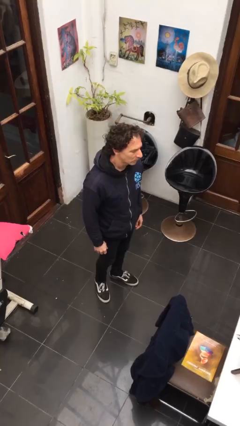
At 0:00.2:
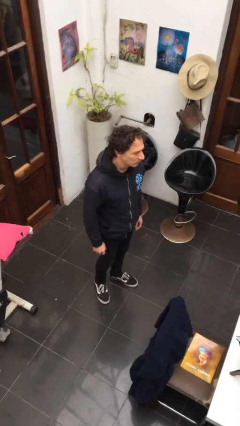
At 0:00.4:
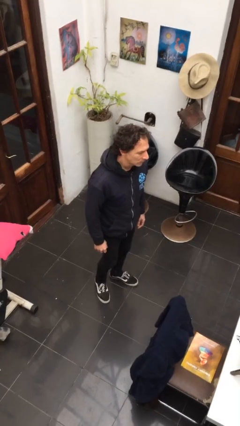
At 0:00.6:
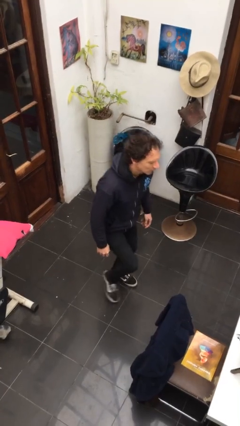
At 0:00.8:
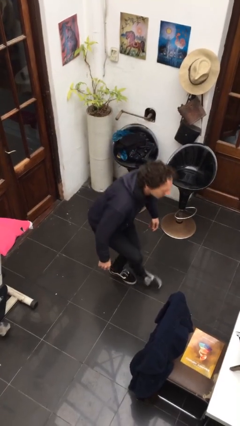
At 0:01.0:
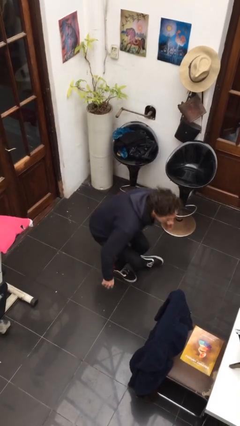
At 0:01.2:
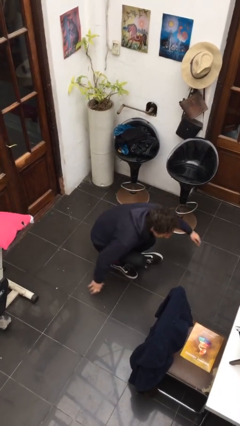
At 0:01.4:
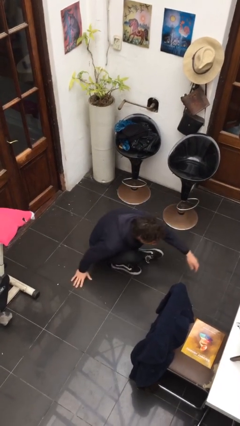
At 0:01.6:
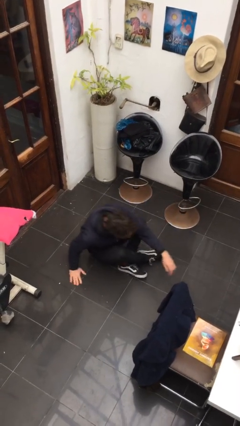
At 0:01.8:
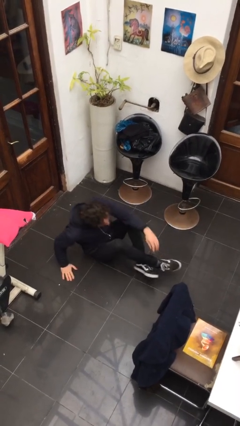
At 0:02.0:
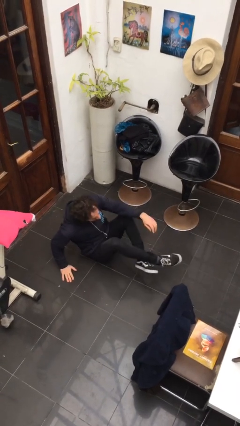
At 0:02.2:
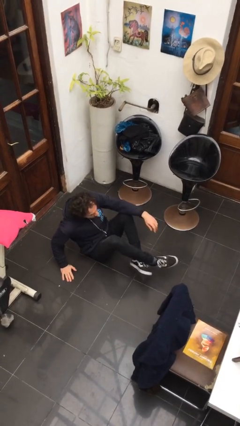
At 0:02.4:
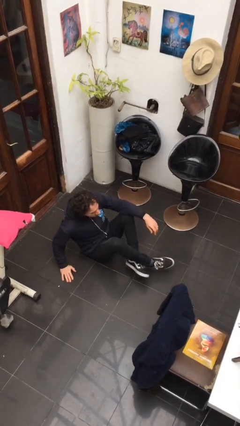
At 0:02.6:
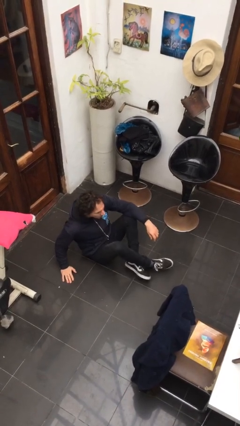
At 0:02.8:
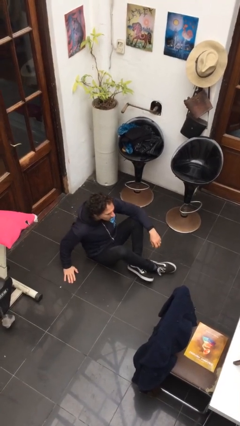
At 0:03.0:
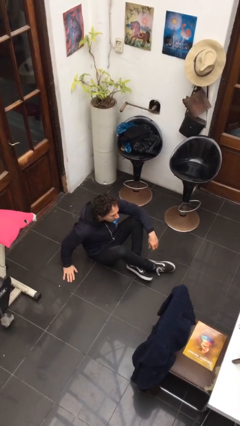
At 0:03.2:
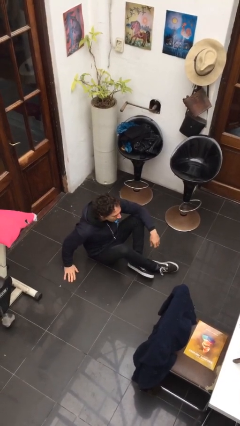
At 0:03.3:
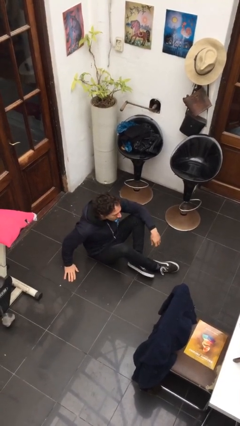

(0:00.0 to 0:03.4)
person sits crisscross

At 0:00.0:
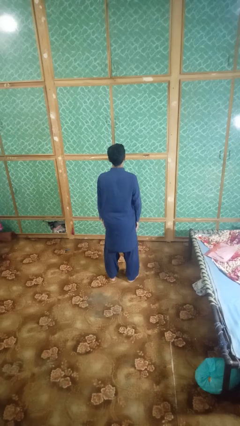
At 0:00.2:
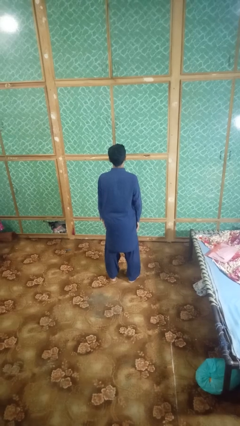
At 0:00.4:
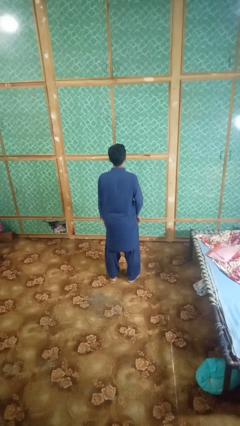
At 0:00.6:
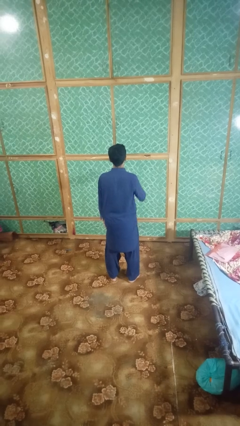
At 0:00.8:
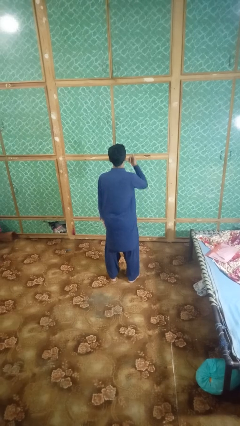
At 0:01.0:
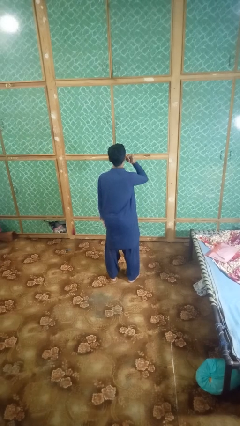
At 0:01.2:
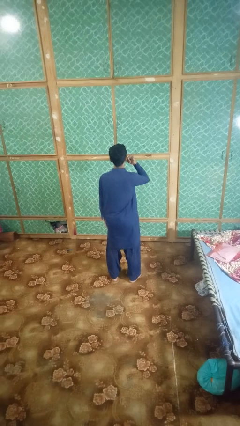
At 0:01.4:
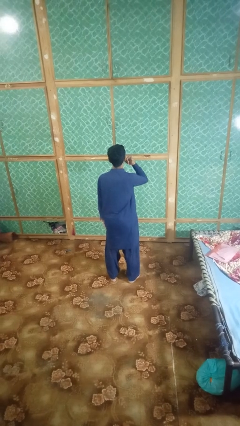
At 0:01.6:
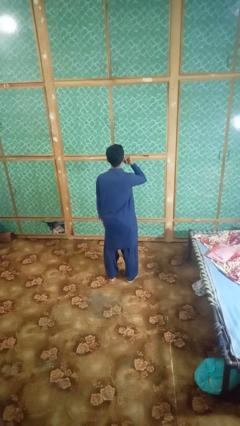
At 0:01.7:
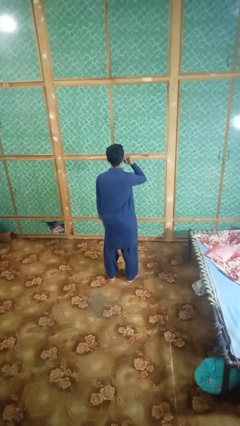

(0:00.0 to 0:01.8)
person gestures call me

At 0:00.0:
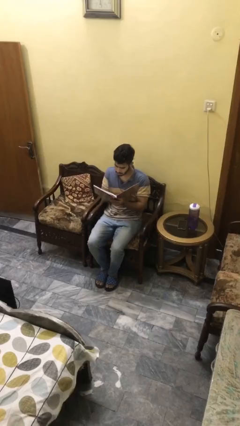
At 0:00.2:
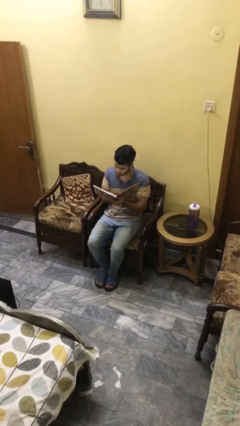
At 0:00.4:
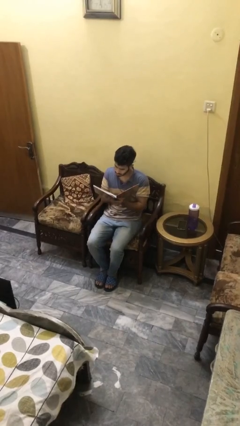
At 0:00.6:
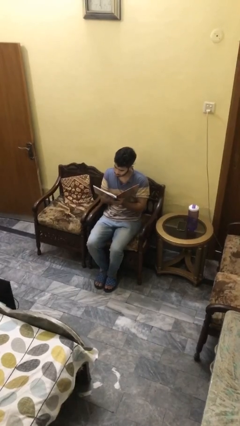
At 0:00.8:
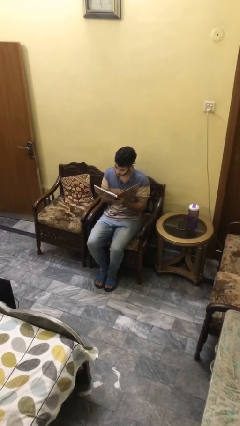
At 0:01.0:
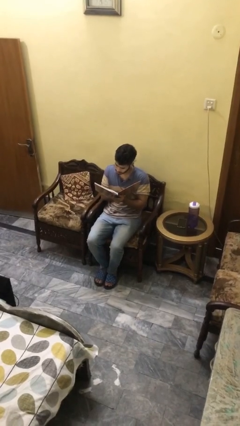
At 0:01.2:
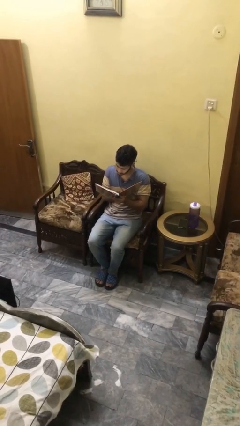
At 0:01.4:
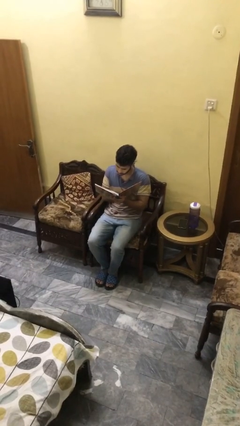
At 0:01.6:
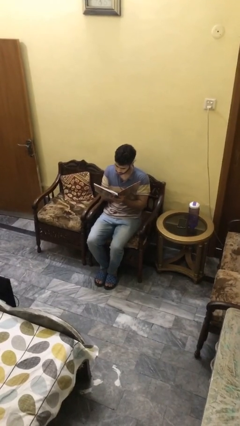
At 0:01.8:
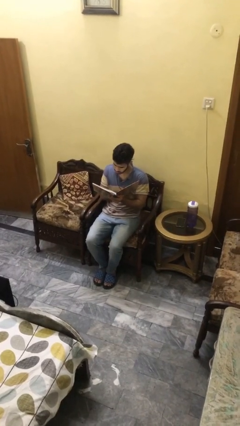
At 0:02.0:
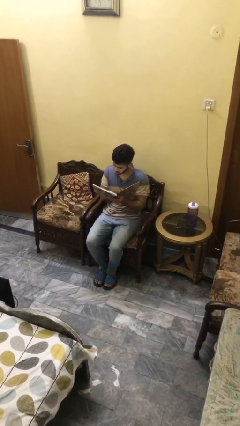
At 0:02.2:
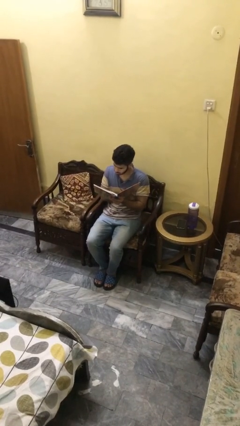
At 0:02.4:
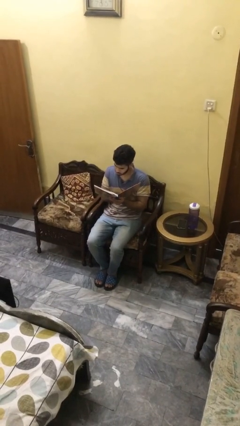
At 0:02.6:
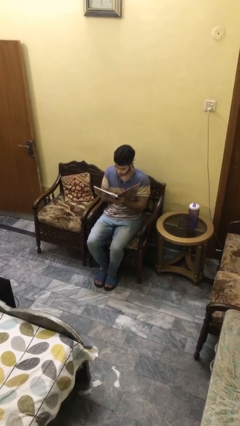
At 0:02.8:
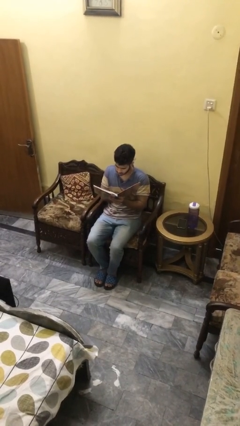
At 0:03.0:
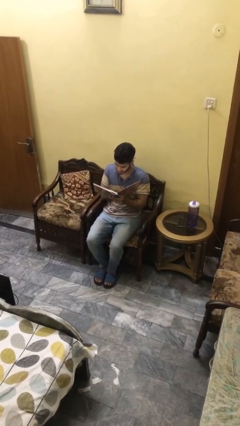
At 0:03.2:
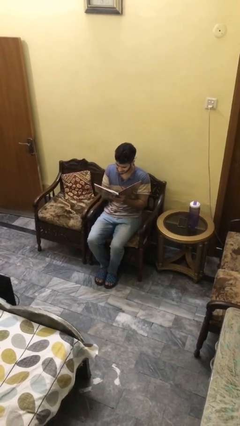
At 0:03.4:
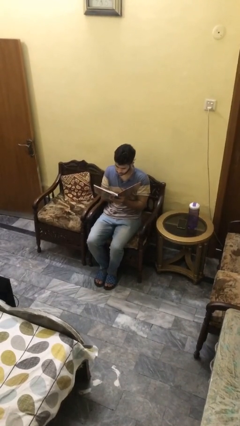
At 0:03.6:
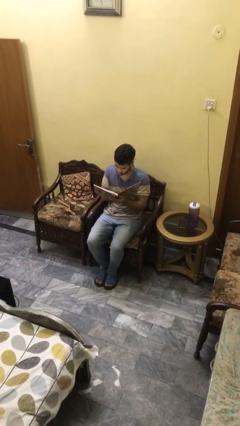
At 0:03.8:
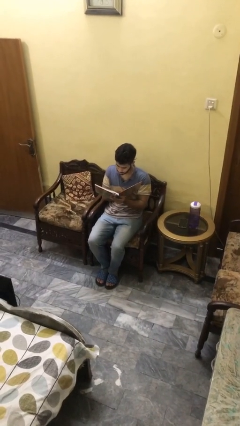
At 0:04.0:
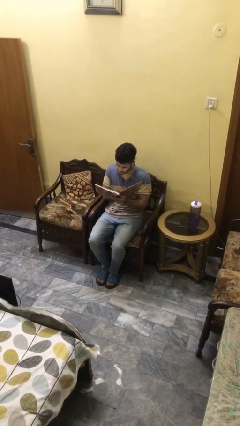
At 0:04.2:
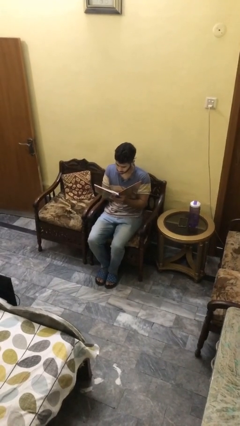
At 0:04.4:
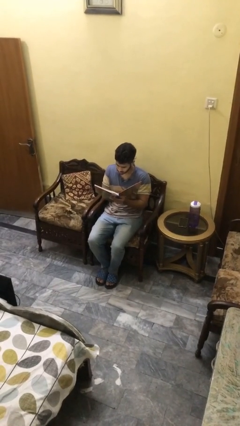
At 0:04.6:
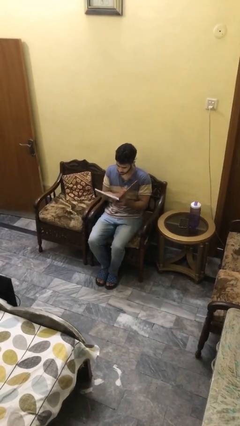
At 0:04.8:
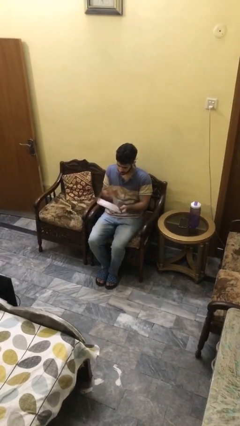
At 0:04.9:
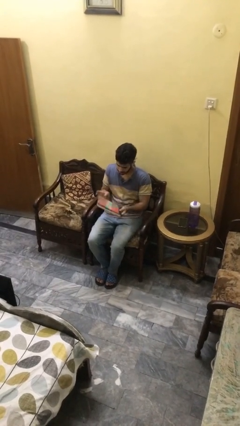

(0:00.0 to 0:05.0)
person reads document

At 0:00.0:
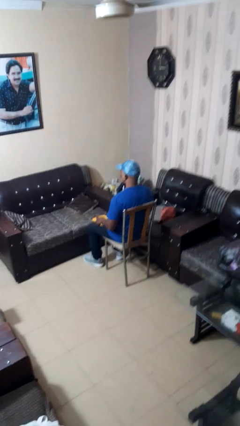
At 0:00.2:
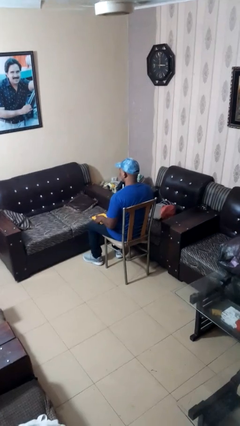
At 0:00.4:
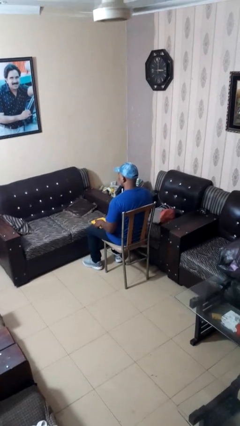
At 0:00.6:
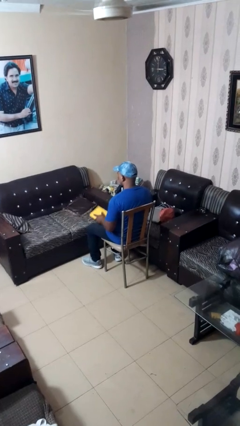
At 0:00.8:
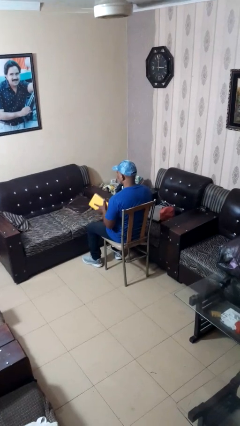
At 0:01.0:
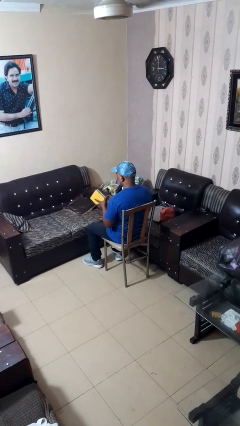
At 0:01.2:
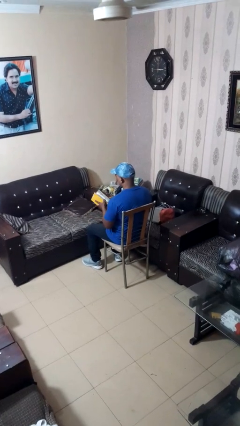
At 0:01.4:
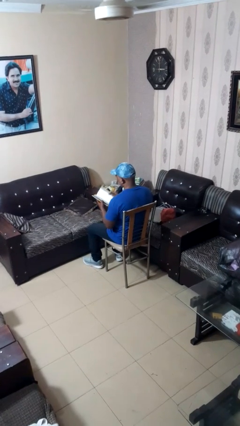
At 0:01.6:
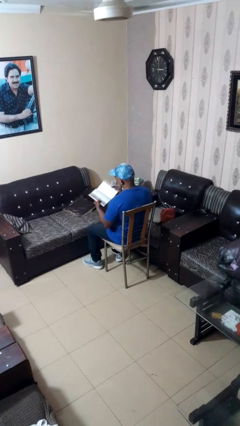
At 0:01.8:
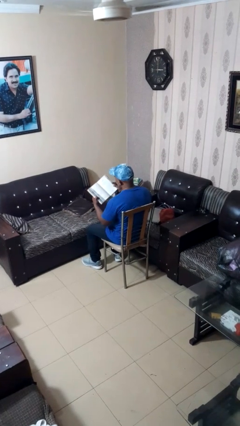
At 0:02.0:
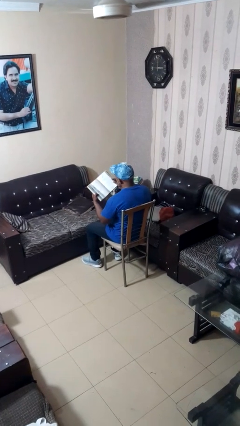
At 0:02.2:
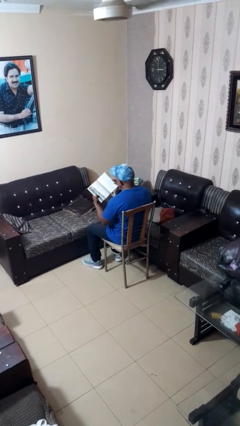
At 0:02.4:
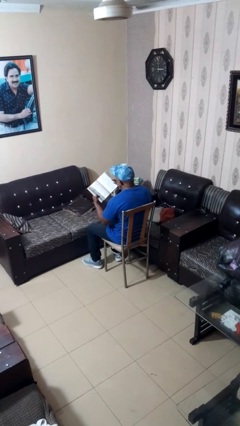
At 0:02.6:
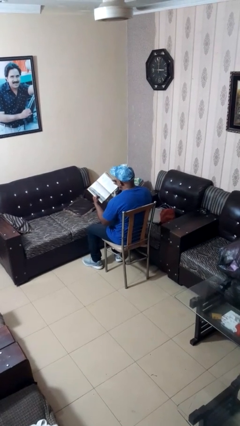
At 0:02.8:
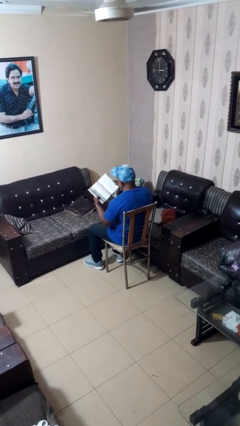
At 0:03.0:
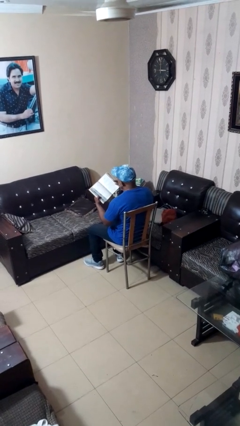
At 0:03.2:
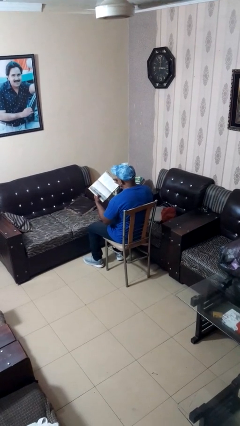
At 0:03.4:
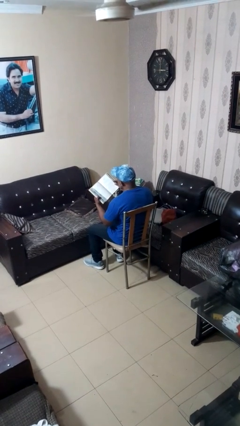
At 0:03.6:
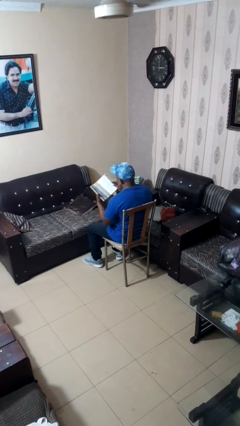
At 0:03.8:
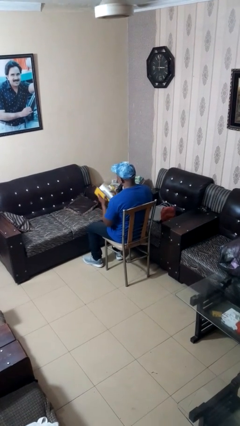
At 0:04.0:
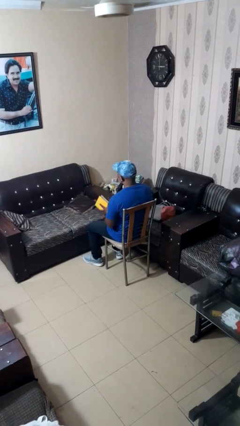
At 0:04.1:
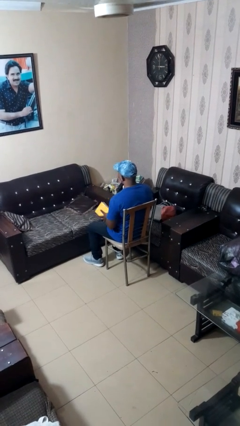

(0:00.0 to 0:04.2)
person reads book

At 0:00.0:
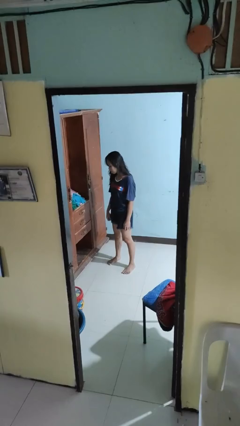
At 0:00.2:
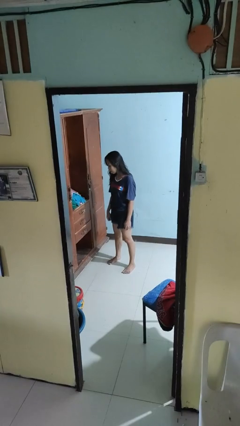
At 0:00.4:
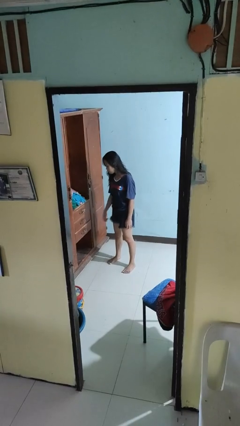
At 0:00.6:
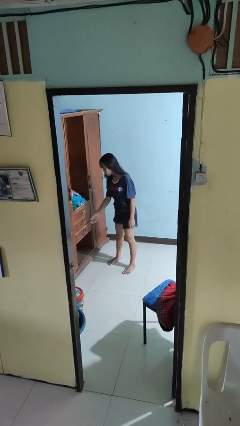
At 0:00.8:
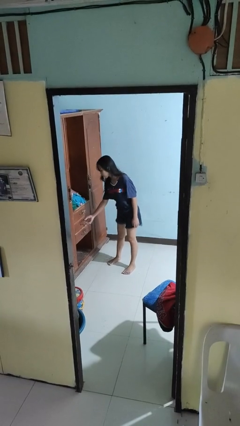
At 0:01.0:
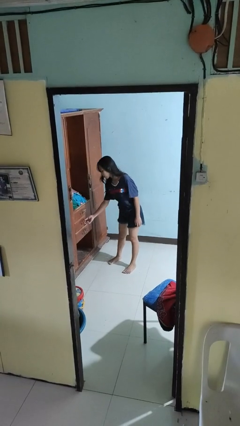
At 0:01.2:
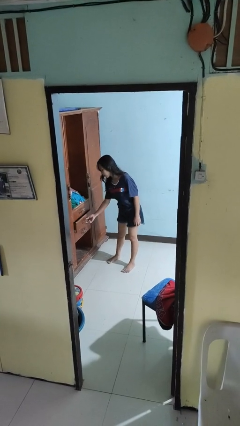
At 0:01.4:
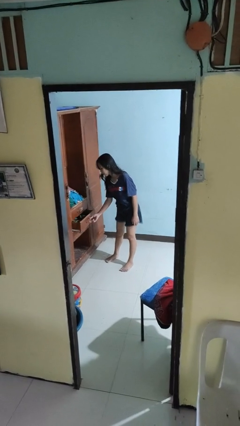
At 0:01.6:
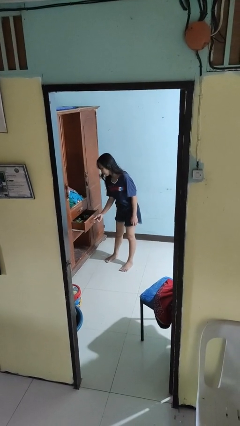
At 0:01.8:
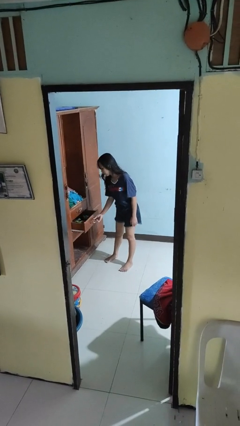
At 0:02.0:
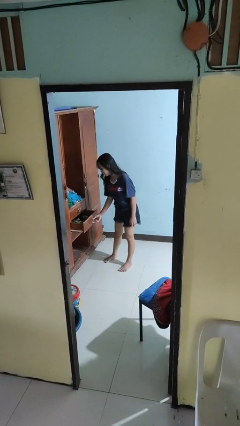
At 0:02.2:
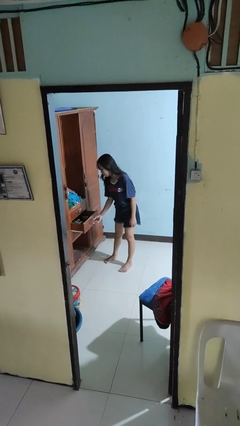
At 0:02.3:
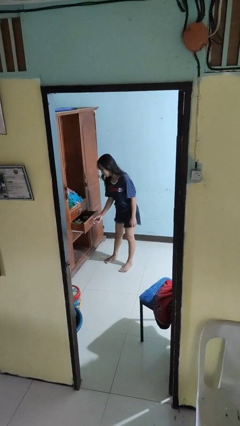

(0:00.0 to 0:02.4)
person opens dresser drawer

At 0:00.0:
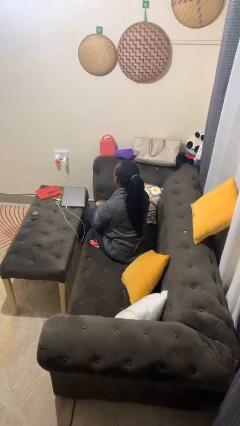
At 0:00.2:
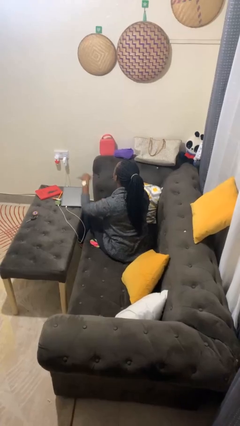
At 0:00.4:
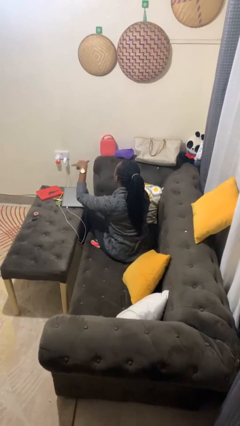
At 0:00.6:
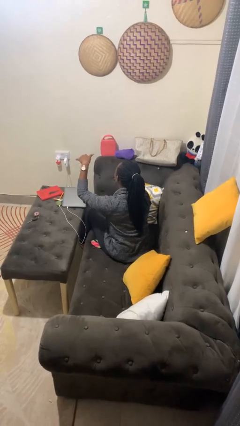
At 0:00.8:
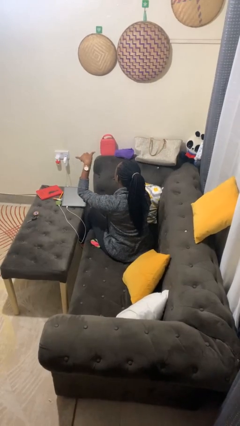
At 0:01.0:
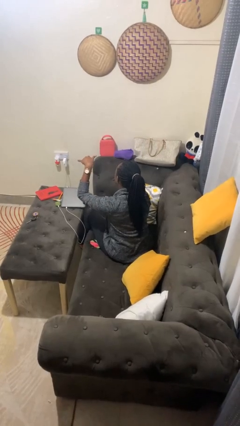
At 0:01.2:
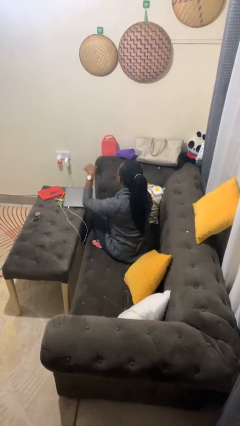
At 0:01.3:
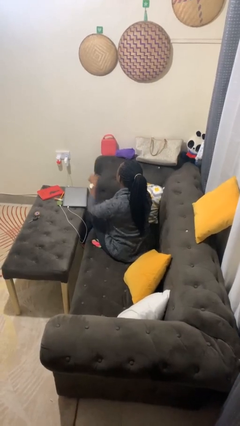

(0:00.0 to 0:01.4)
person gestures hang loose
